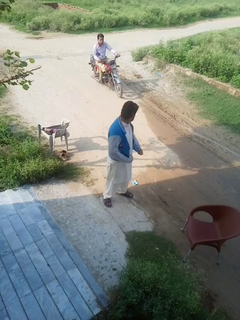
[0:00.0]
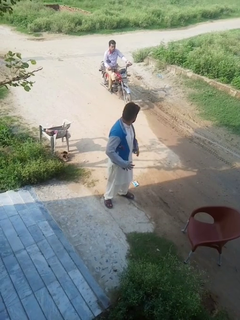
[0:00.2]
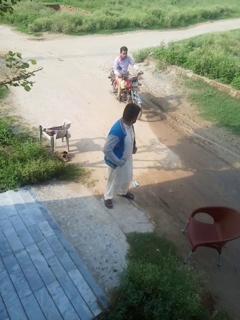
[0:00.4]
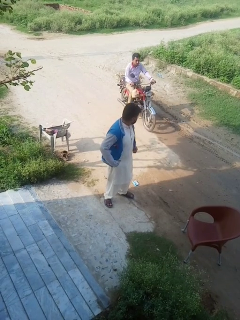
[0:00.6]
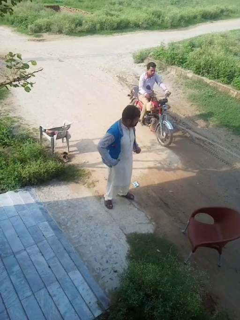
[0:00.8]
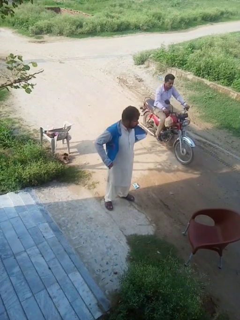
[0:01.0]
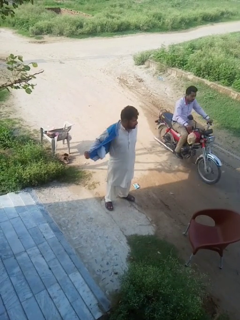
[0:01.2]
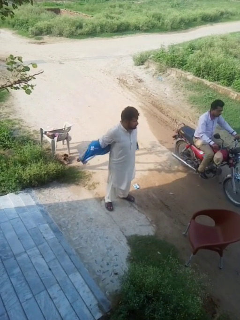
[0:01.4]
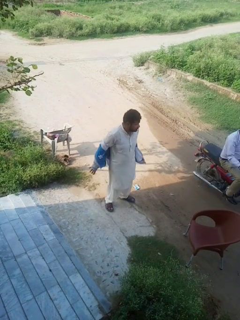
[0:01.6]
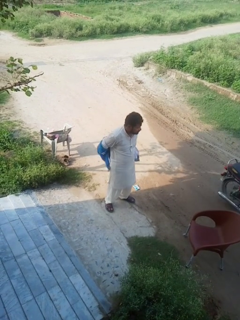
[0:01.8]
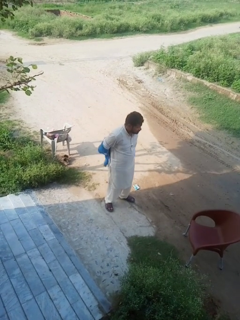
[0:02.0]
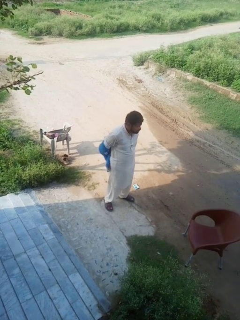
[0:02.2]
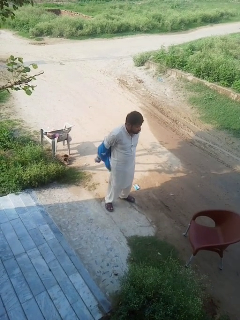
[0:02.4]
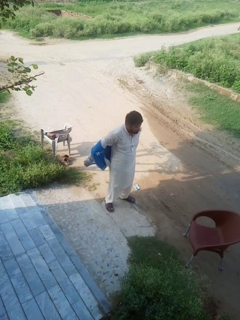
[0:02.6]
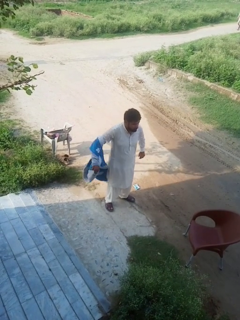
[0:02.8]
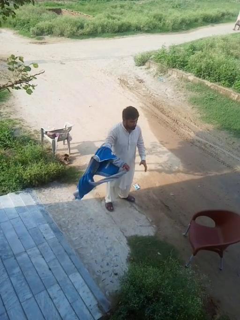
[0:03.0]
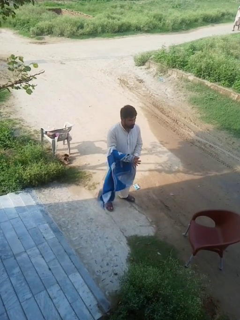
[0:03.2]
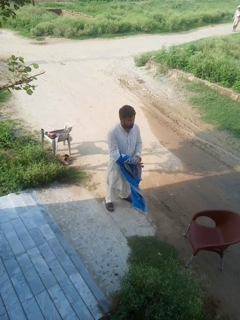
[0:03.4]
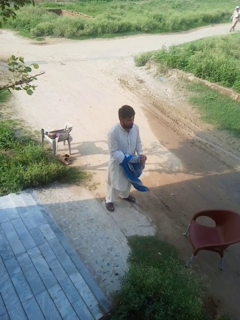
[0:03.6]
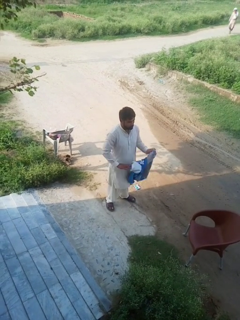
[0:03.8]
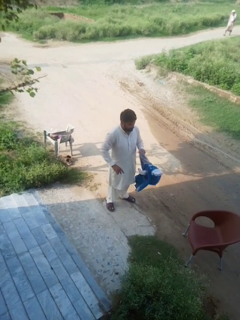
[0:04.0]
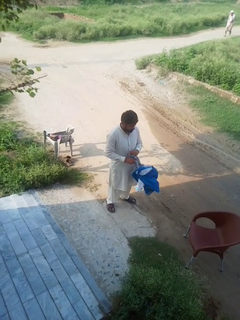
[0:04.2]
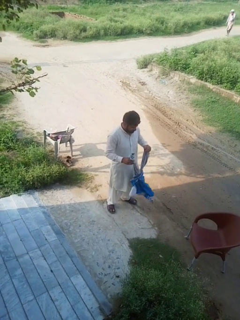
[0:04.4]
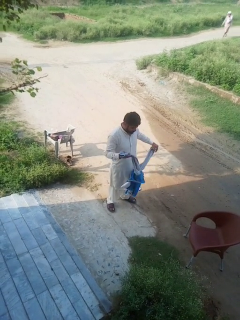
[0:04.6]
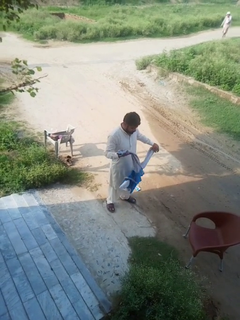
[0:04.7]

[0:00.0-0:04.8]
person takes off jacket

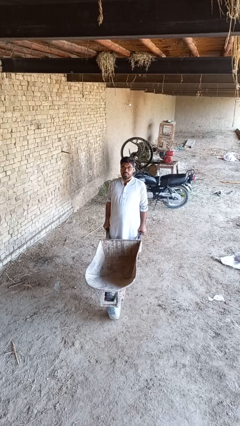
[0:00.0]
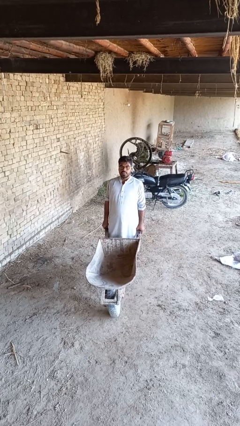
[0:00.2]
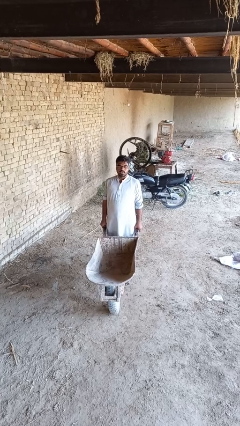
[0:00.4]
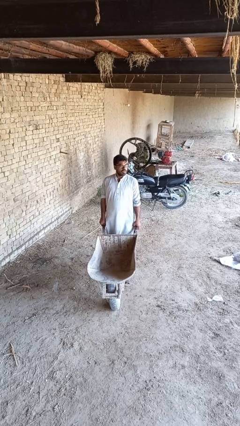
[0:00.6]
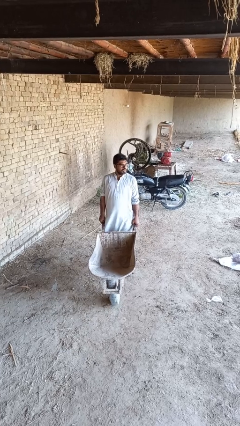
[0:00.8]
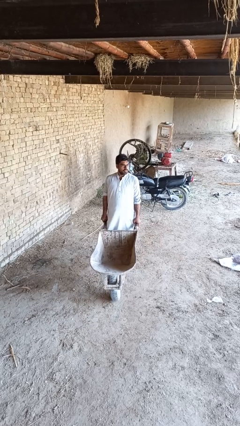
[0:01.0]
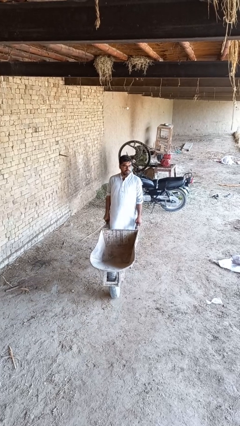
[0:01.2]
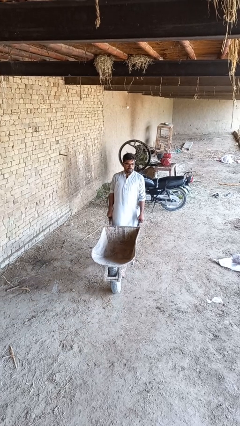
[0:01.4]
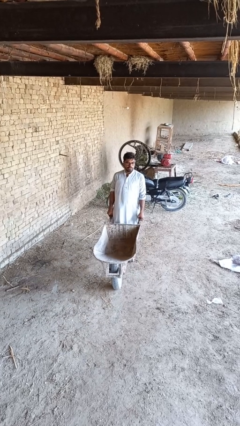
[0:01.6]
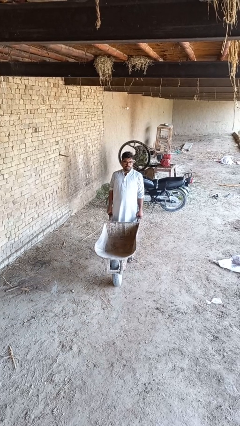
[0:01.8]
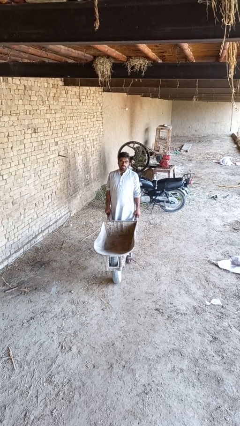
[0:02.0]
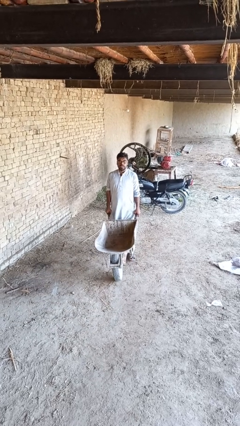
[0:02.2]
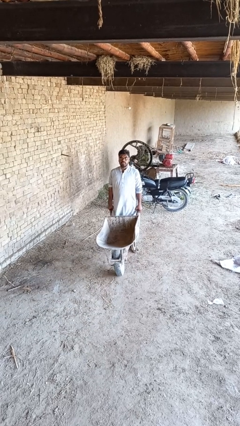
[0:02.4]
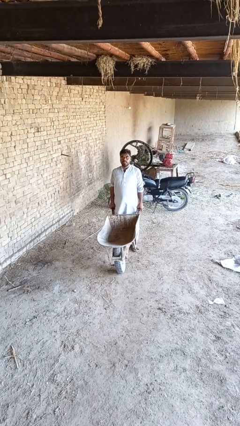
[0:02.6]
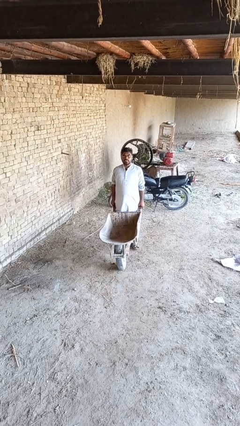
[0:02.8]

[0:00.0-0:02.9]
person pulls wheeled cart

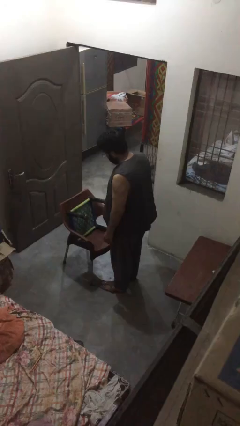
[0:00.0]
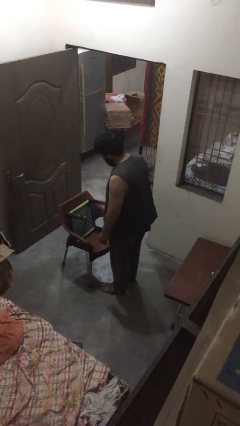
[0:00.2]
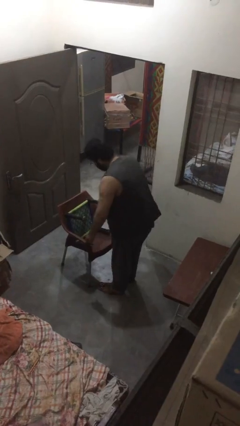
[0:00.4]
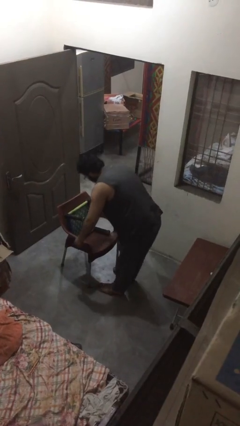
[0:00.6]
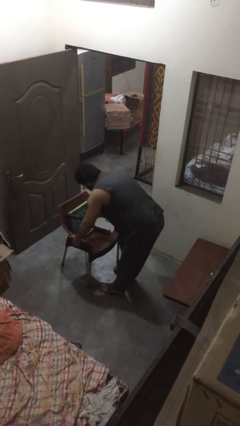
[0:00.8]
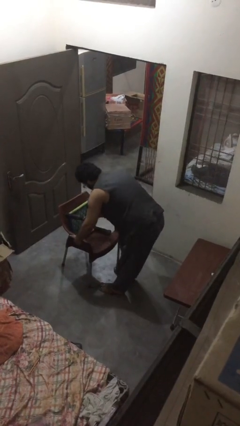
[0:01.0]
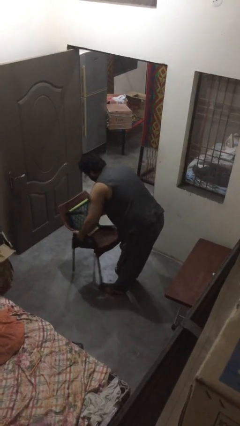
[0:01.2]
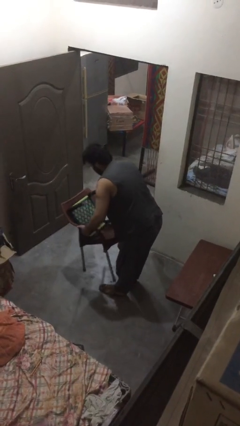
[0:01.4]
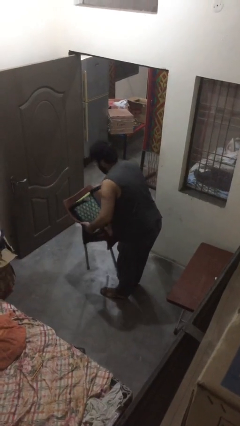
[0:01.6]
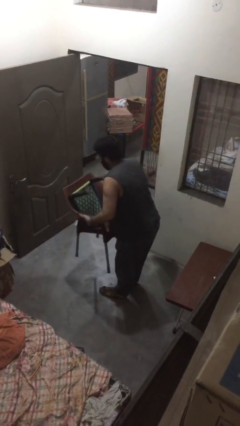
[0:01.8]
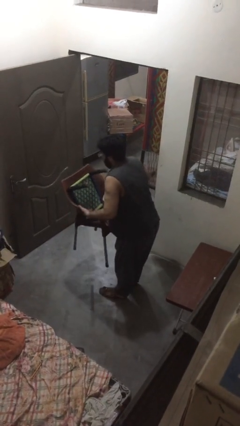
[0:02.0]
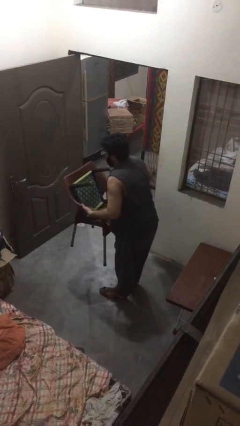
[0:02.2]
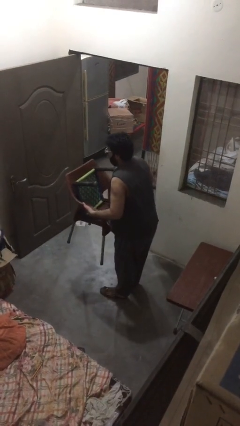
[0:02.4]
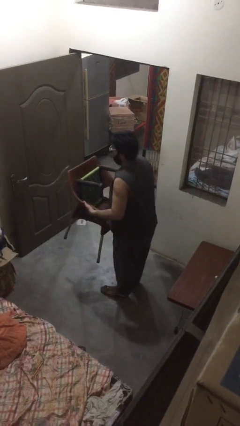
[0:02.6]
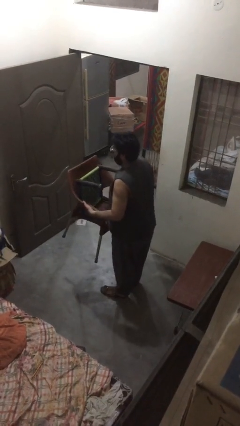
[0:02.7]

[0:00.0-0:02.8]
person picks up object from floor

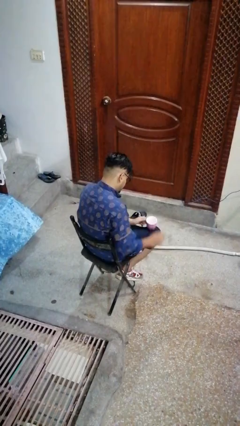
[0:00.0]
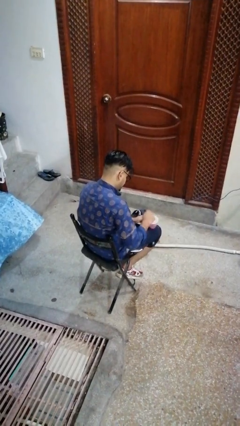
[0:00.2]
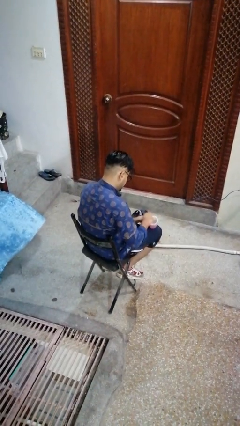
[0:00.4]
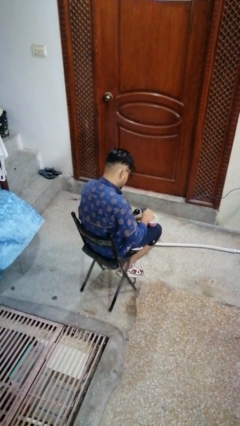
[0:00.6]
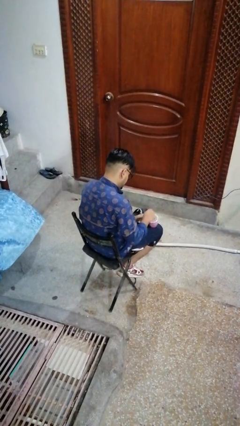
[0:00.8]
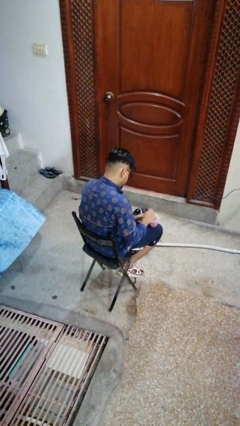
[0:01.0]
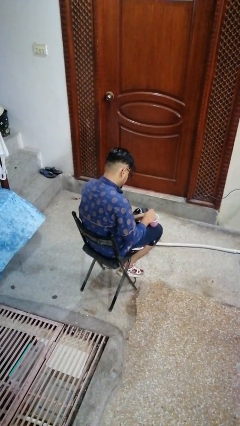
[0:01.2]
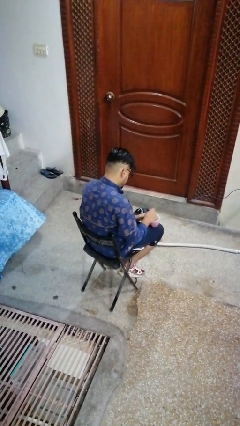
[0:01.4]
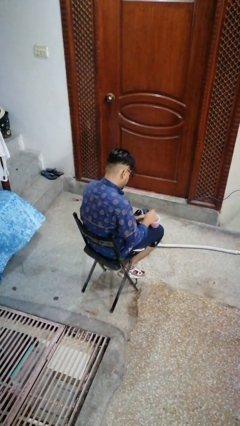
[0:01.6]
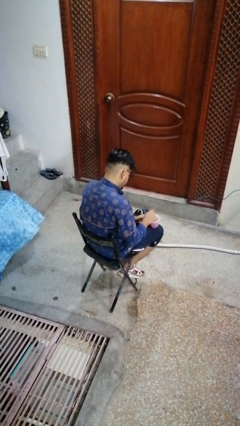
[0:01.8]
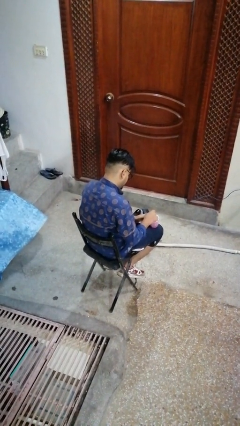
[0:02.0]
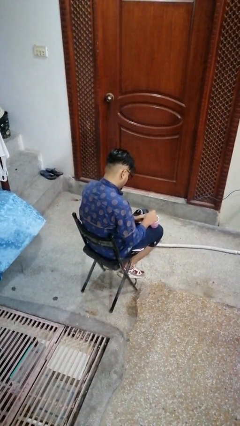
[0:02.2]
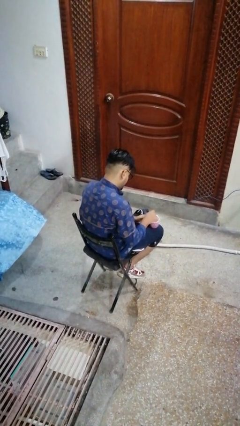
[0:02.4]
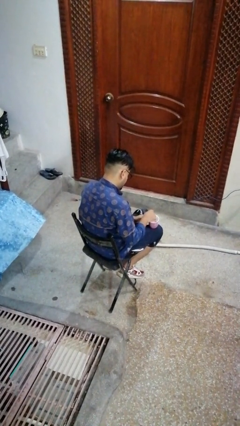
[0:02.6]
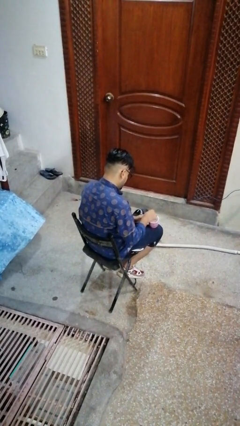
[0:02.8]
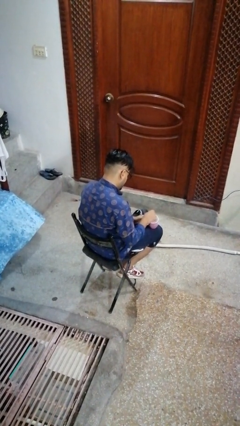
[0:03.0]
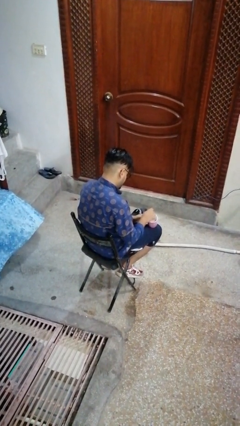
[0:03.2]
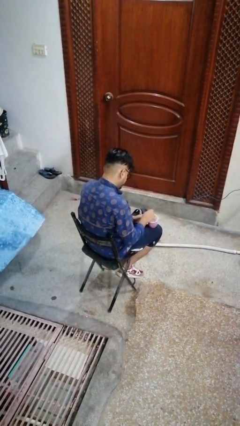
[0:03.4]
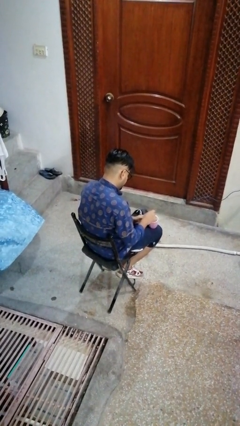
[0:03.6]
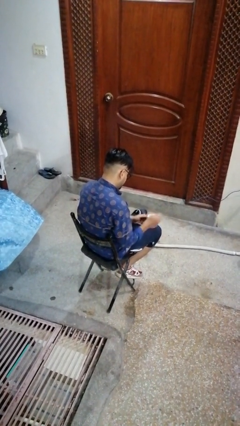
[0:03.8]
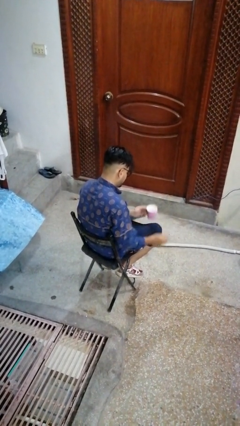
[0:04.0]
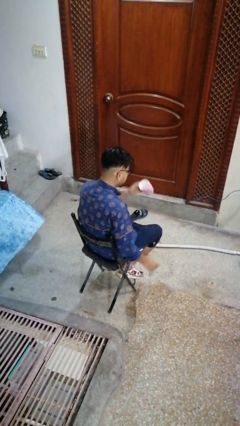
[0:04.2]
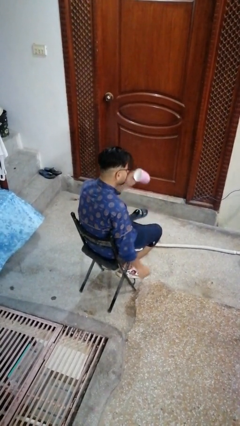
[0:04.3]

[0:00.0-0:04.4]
person stirs mug

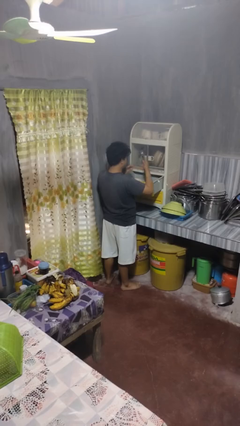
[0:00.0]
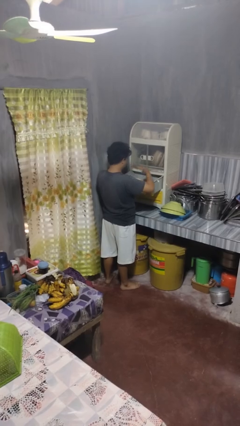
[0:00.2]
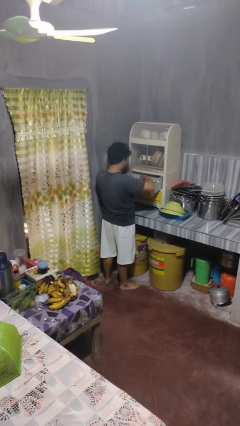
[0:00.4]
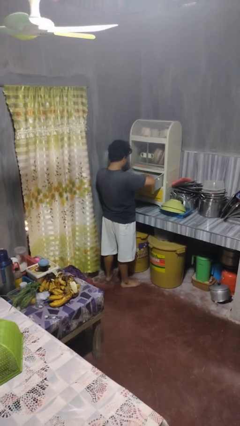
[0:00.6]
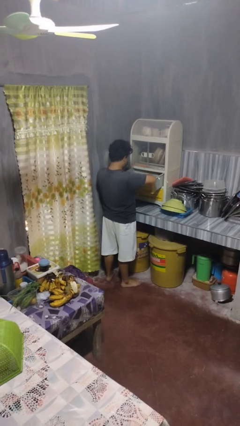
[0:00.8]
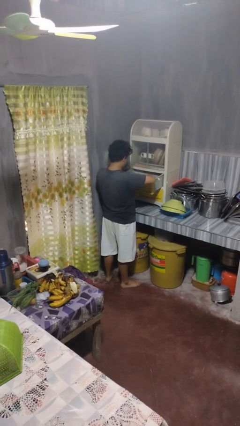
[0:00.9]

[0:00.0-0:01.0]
person puts object into kitchen drawer

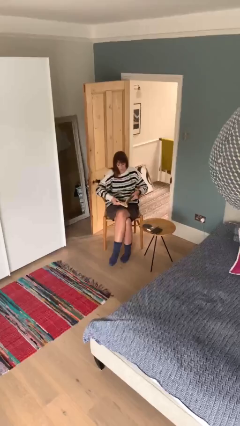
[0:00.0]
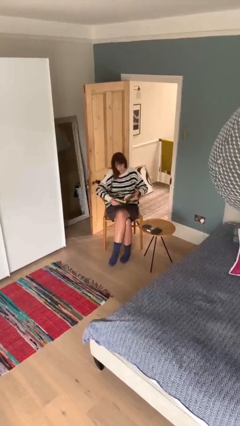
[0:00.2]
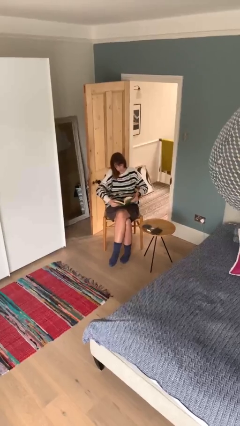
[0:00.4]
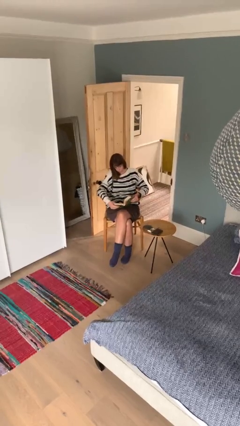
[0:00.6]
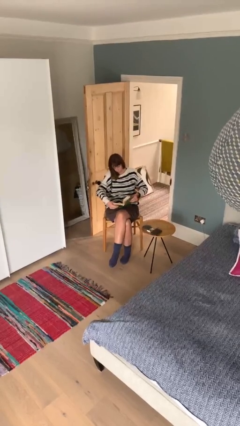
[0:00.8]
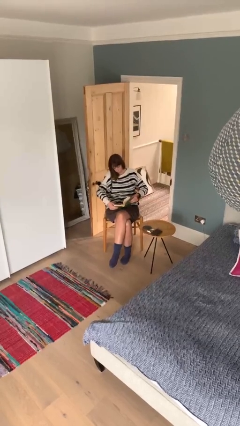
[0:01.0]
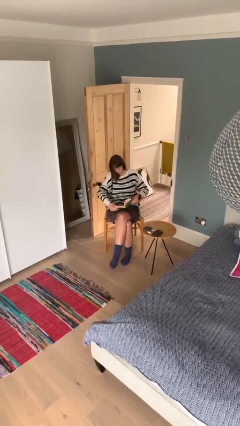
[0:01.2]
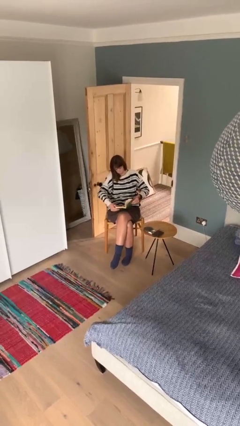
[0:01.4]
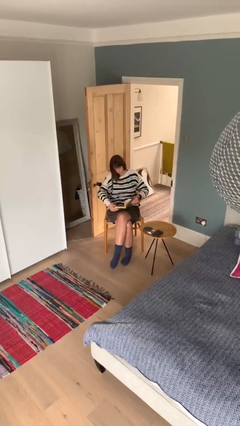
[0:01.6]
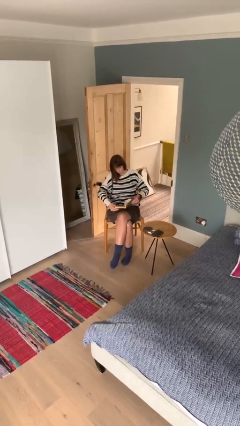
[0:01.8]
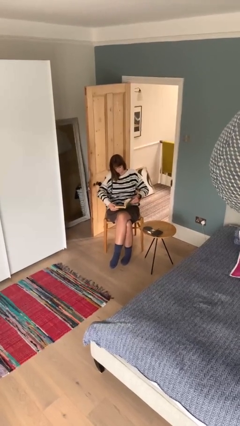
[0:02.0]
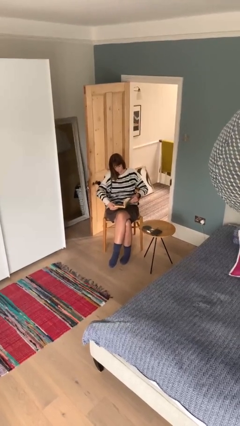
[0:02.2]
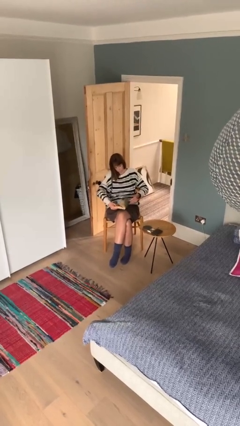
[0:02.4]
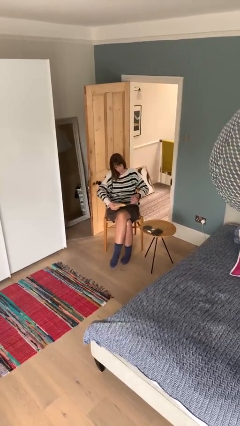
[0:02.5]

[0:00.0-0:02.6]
person reads document
